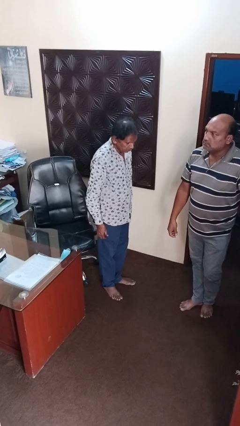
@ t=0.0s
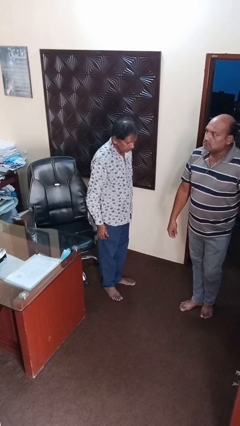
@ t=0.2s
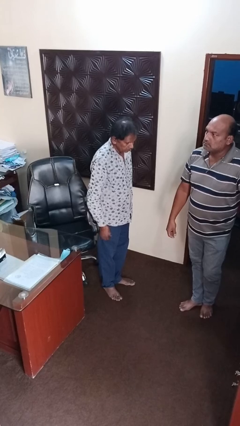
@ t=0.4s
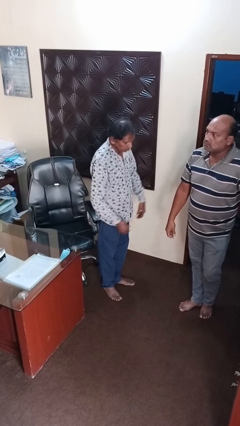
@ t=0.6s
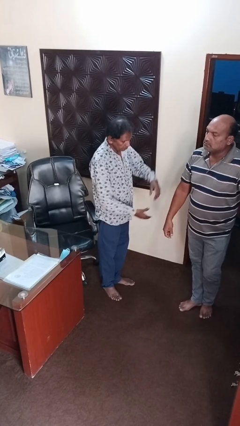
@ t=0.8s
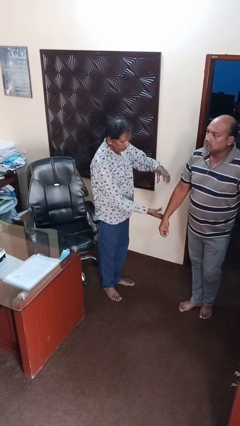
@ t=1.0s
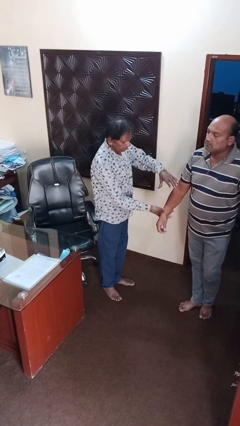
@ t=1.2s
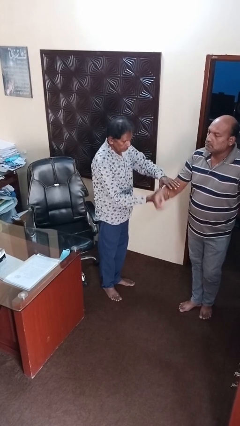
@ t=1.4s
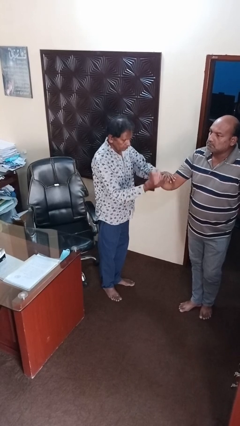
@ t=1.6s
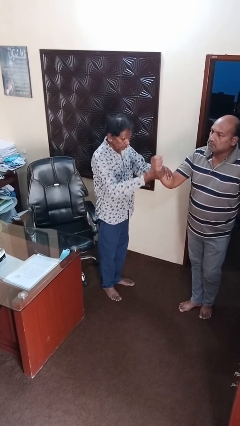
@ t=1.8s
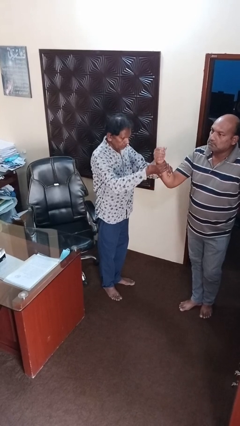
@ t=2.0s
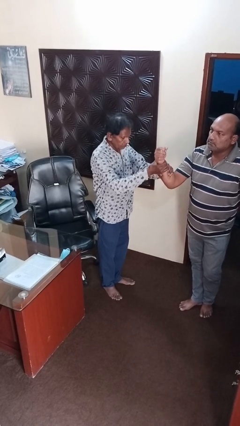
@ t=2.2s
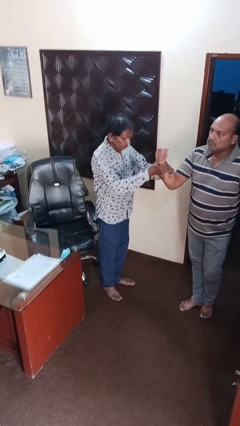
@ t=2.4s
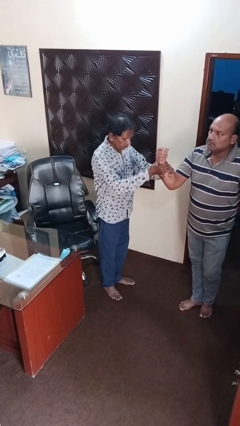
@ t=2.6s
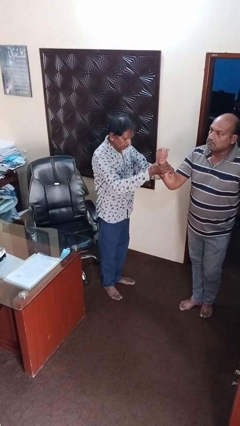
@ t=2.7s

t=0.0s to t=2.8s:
person grabs person by forearm

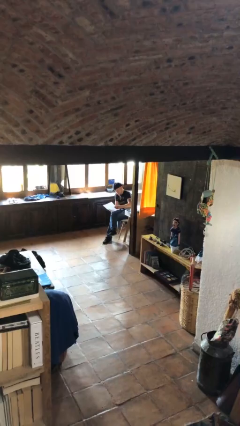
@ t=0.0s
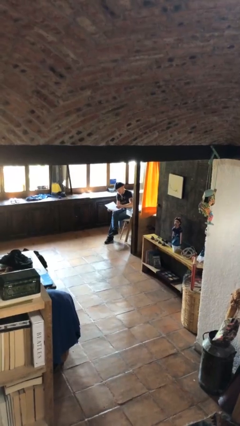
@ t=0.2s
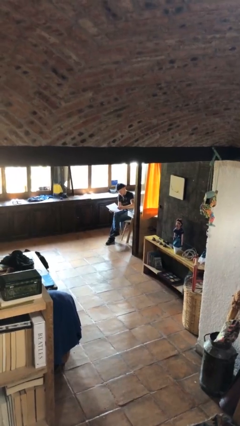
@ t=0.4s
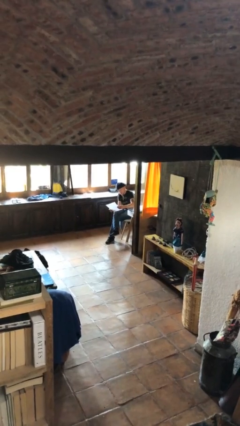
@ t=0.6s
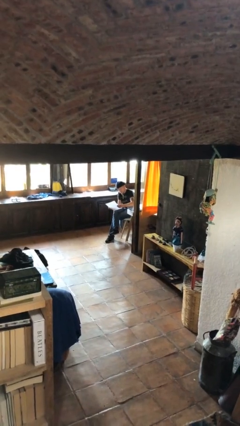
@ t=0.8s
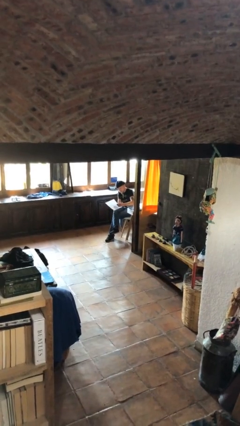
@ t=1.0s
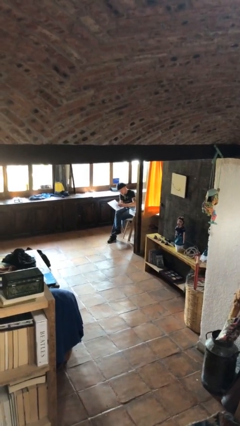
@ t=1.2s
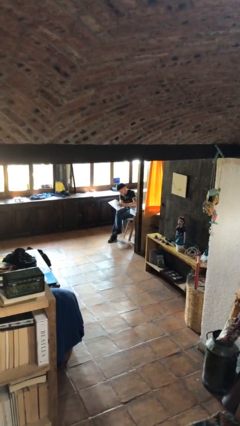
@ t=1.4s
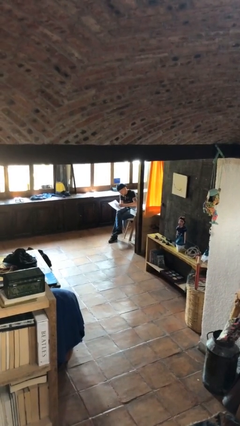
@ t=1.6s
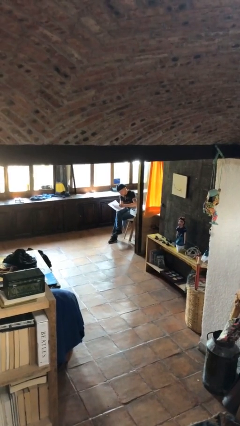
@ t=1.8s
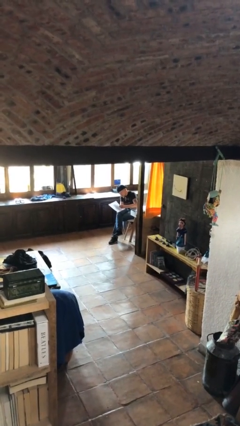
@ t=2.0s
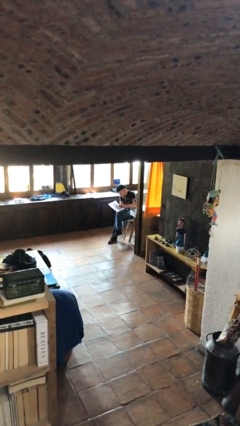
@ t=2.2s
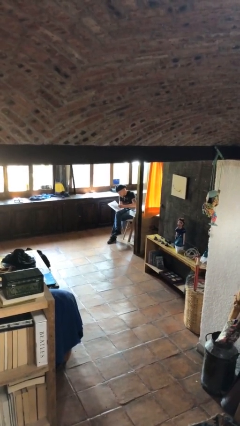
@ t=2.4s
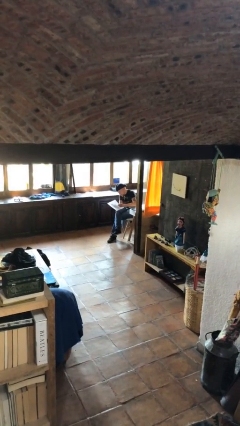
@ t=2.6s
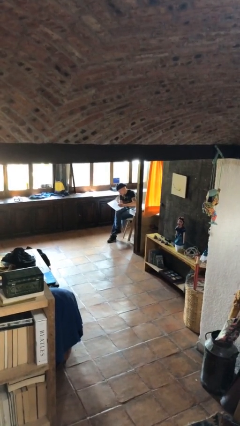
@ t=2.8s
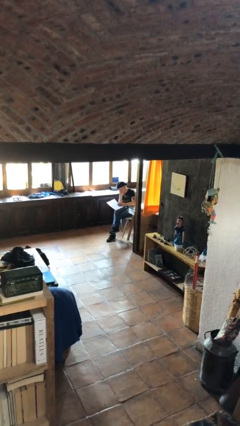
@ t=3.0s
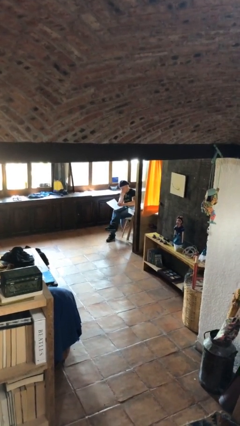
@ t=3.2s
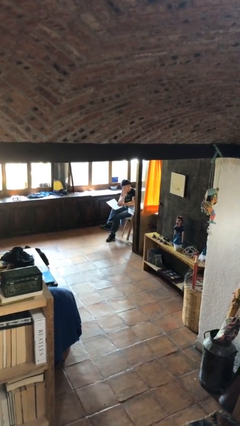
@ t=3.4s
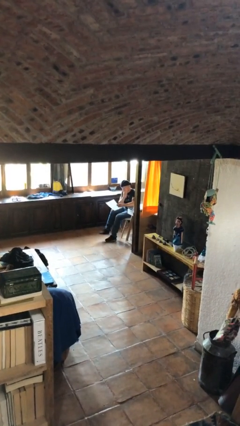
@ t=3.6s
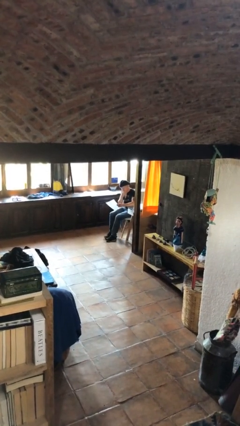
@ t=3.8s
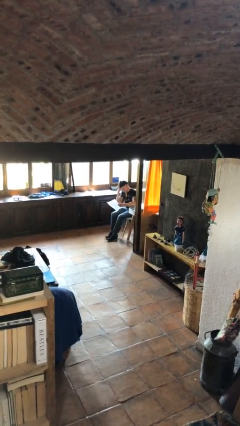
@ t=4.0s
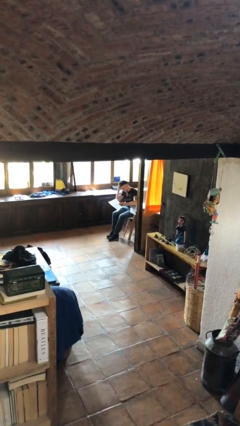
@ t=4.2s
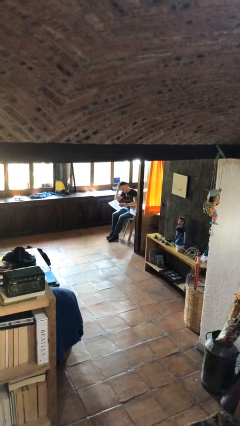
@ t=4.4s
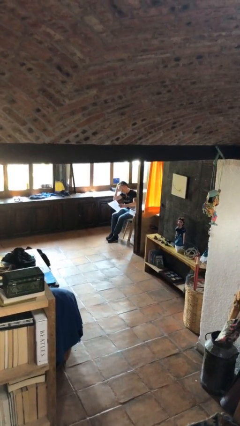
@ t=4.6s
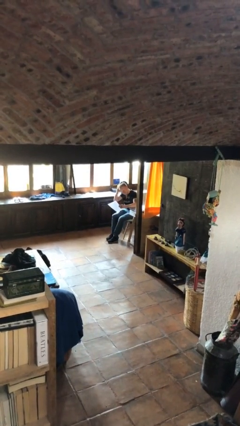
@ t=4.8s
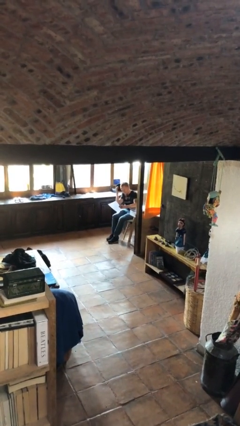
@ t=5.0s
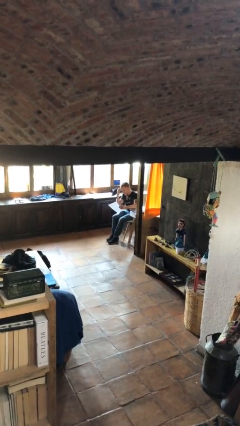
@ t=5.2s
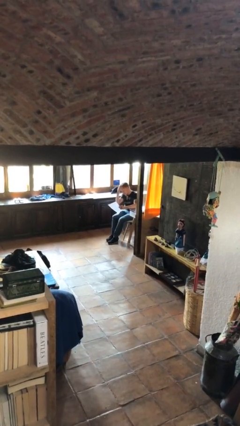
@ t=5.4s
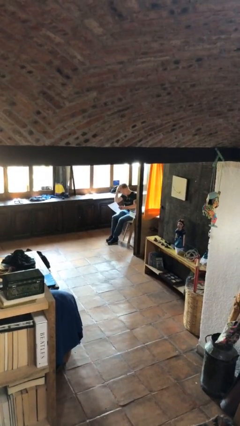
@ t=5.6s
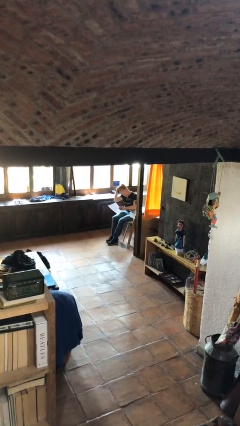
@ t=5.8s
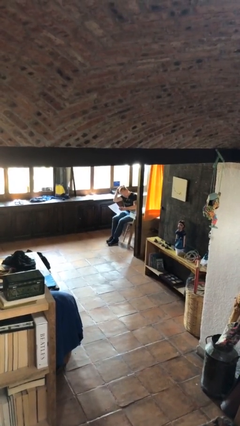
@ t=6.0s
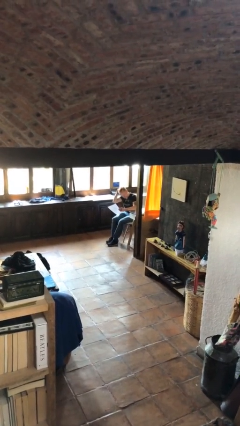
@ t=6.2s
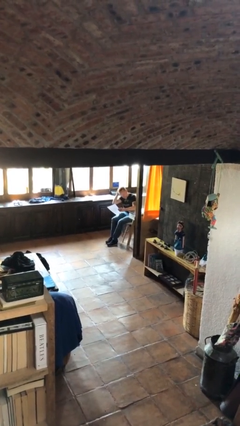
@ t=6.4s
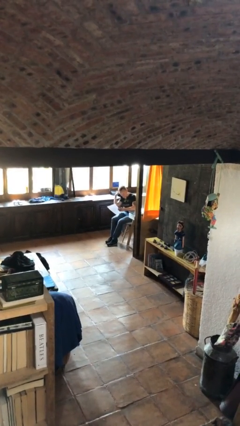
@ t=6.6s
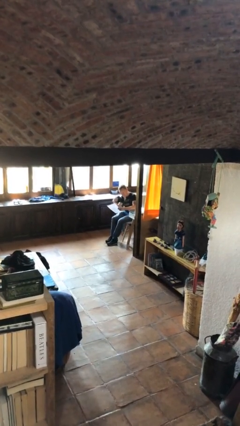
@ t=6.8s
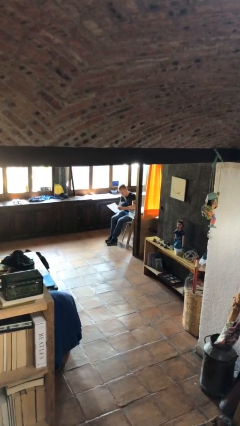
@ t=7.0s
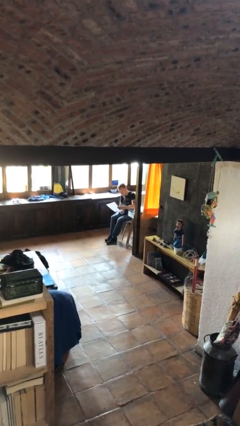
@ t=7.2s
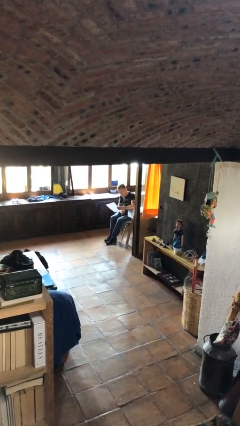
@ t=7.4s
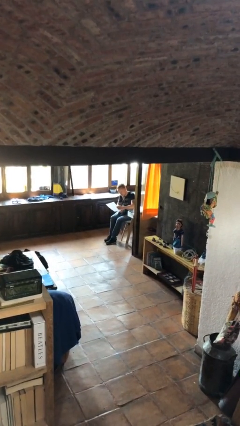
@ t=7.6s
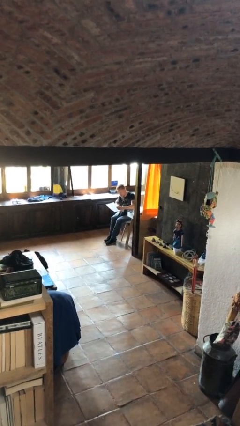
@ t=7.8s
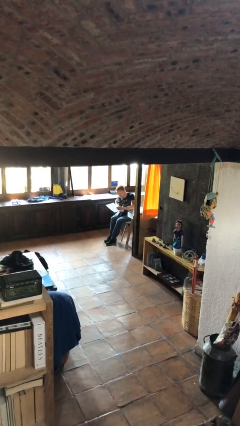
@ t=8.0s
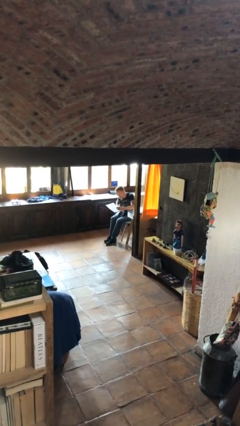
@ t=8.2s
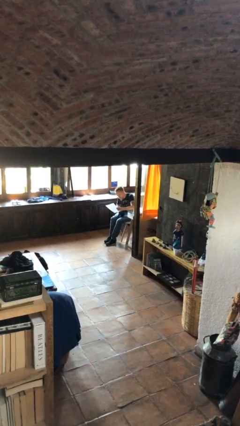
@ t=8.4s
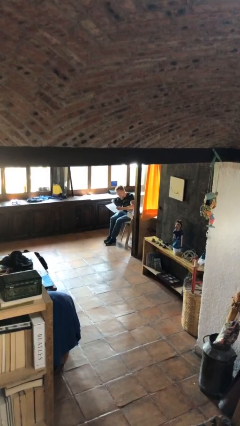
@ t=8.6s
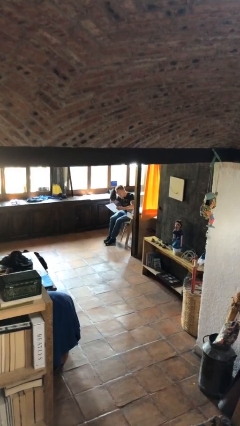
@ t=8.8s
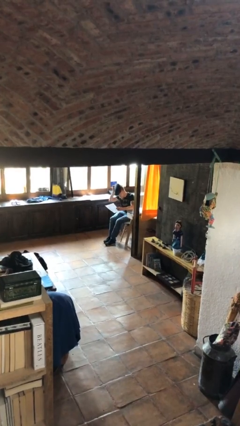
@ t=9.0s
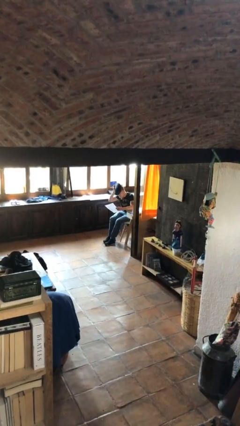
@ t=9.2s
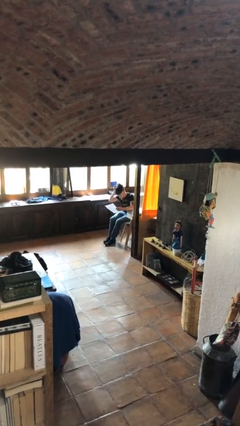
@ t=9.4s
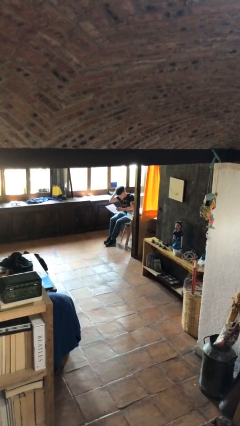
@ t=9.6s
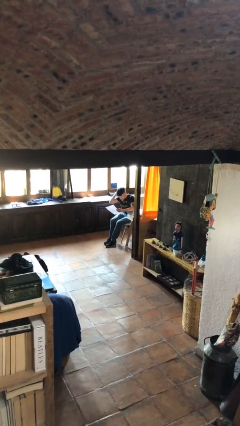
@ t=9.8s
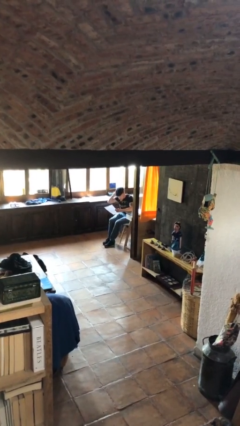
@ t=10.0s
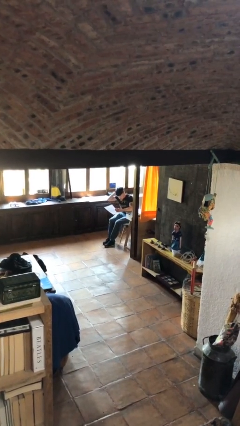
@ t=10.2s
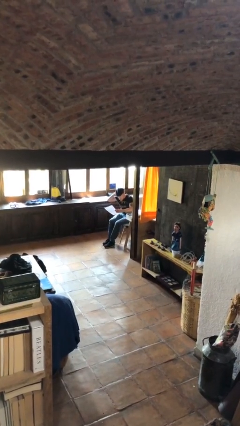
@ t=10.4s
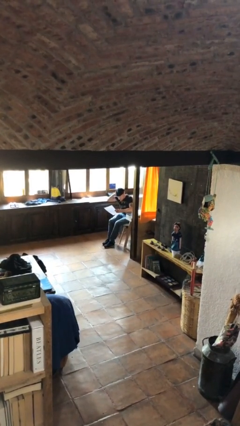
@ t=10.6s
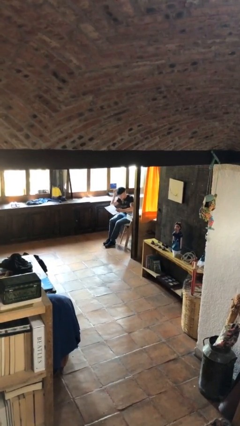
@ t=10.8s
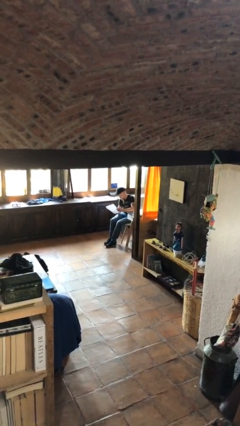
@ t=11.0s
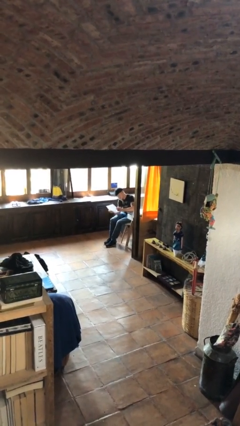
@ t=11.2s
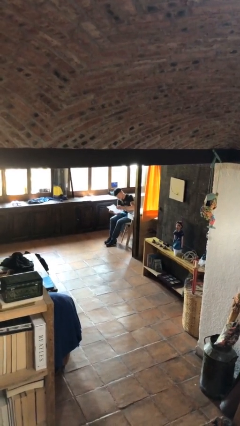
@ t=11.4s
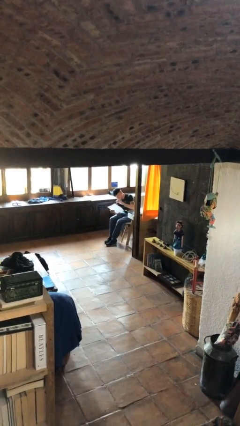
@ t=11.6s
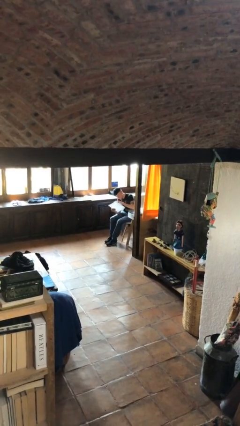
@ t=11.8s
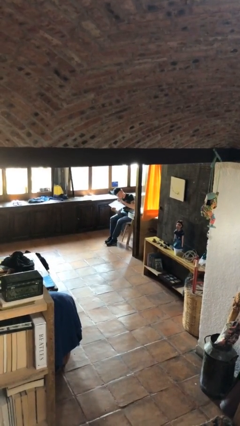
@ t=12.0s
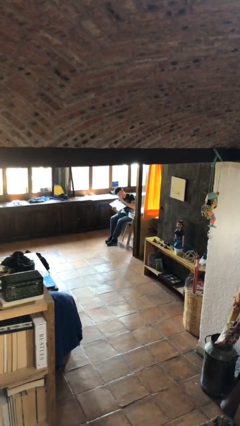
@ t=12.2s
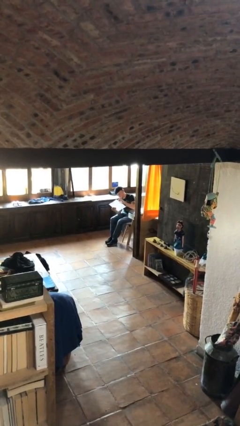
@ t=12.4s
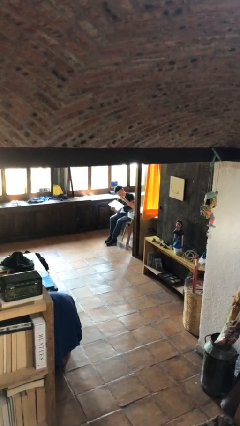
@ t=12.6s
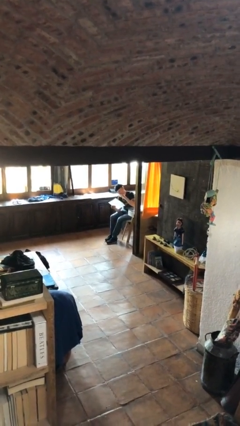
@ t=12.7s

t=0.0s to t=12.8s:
person reads document

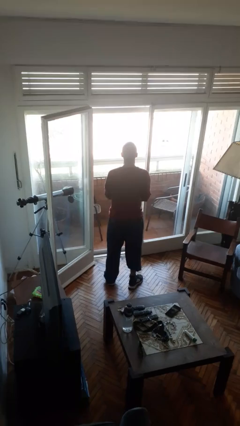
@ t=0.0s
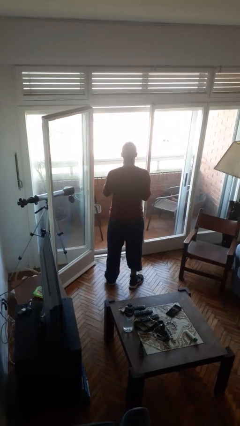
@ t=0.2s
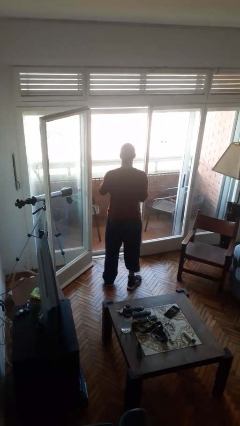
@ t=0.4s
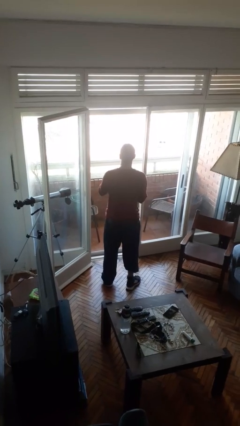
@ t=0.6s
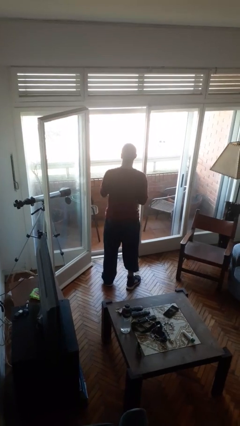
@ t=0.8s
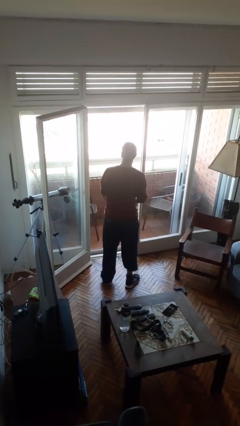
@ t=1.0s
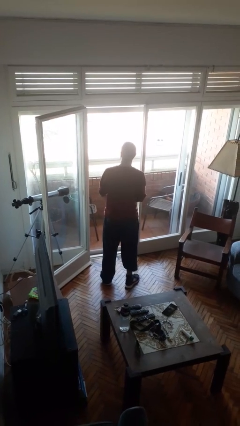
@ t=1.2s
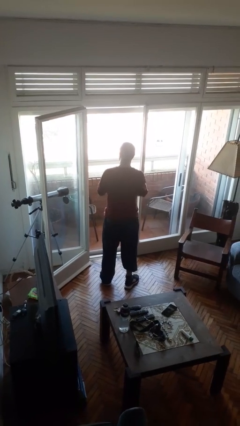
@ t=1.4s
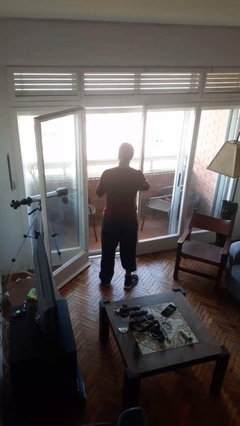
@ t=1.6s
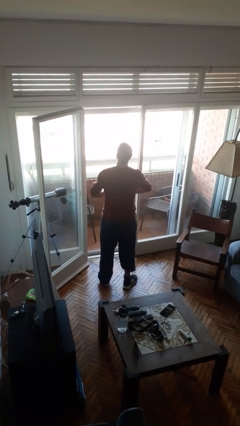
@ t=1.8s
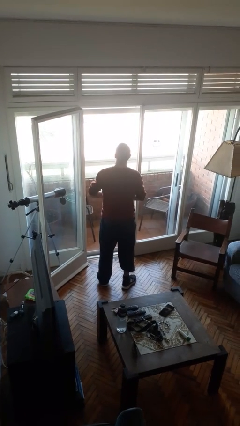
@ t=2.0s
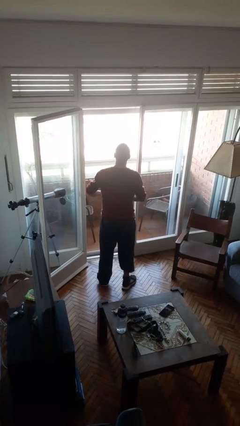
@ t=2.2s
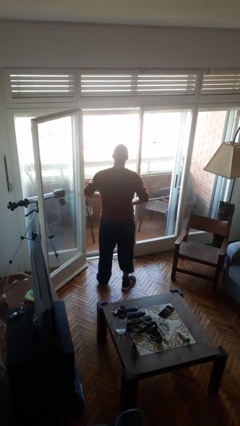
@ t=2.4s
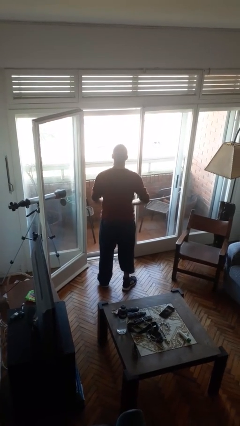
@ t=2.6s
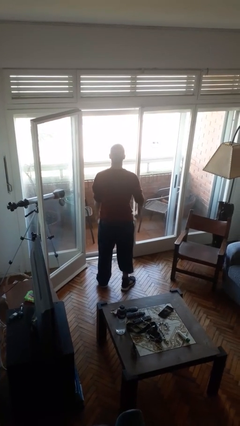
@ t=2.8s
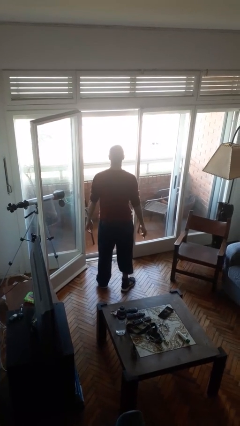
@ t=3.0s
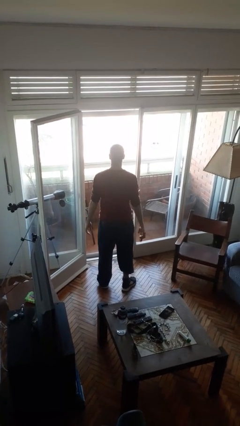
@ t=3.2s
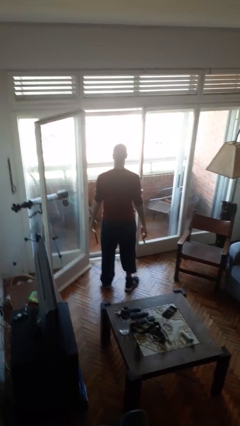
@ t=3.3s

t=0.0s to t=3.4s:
person takes off wristwatch
